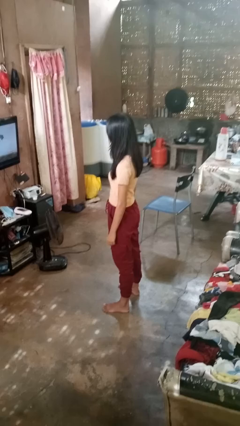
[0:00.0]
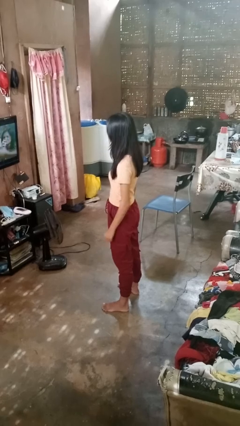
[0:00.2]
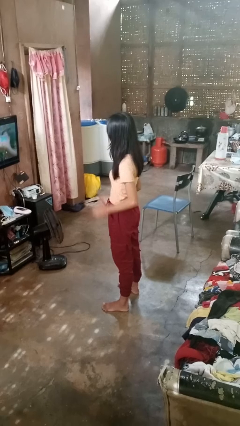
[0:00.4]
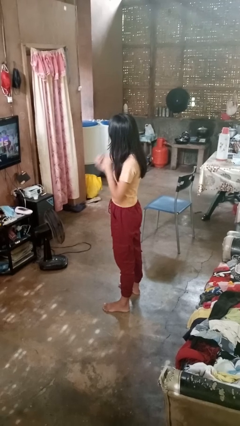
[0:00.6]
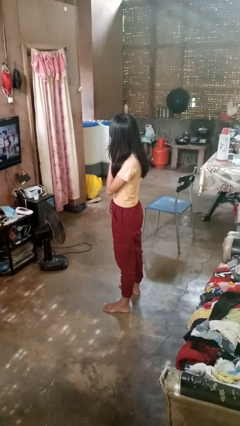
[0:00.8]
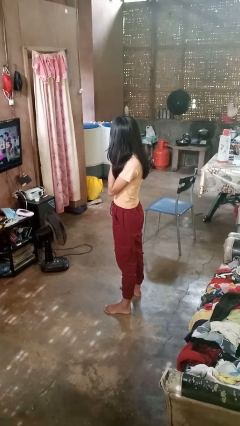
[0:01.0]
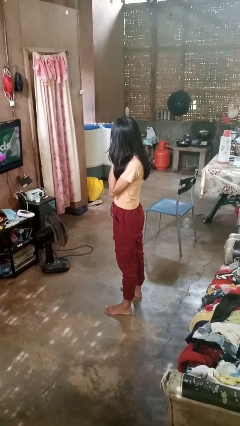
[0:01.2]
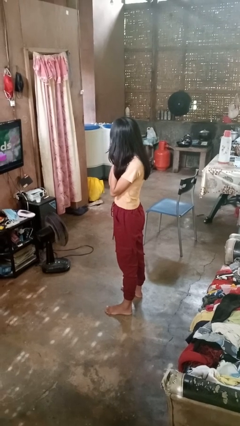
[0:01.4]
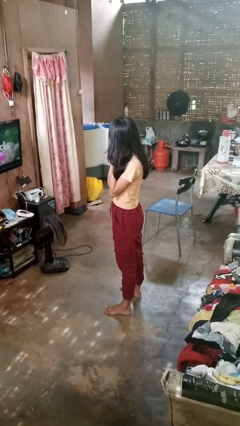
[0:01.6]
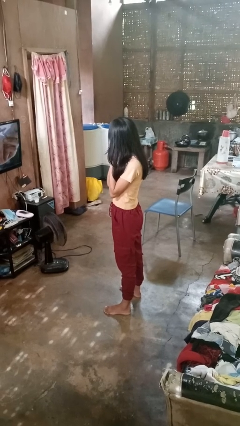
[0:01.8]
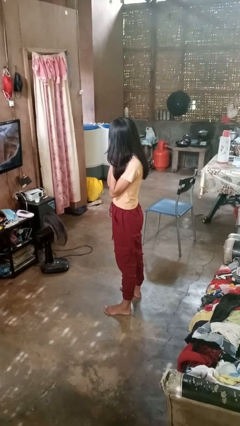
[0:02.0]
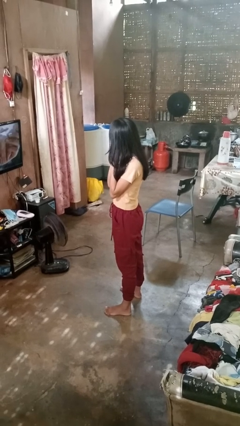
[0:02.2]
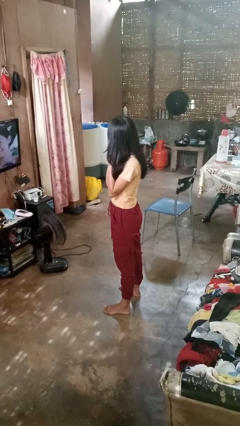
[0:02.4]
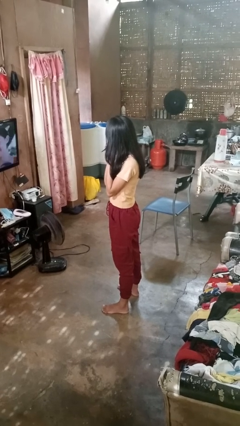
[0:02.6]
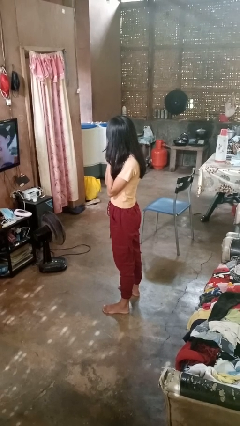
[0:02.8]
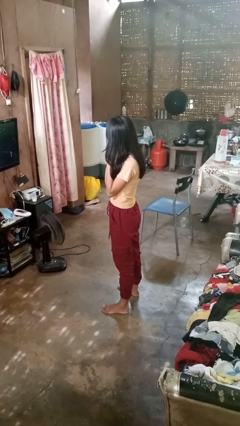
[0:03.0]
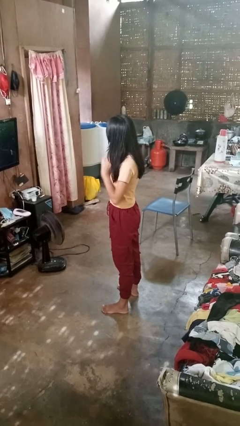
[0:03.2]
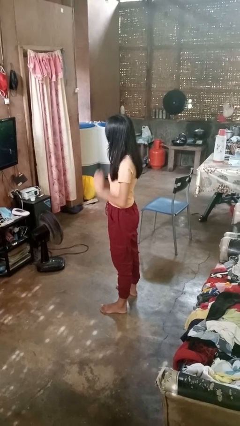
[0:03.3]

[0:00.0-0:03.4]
person puts on earrings

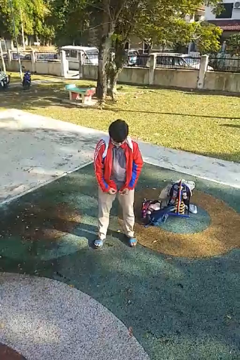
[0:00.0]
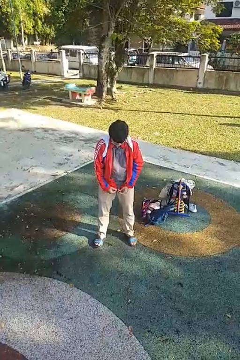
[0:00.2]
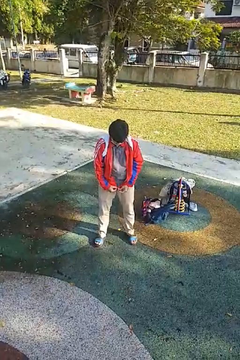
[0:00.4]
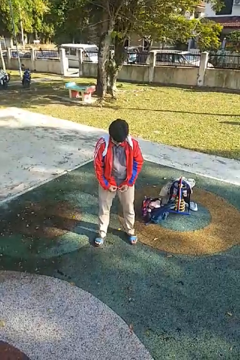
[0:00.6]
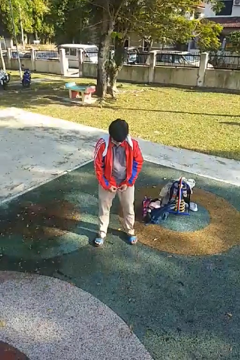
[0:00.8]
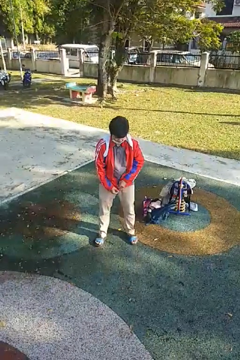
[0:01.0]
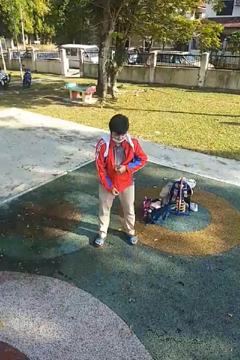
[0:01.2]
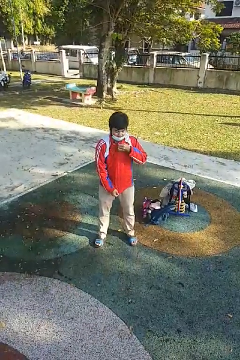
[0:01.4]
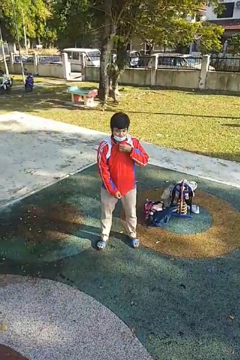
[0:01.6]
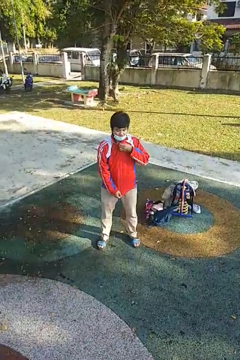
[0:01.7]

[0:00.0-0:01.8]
person zips up jacket

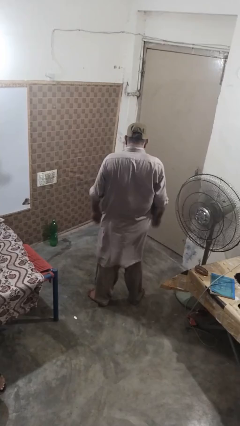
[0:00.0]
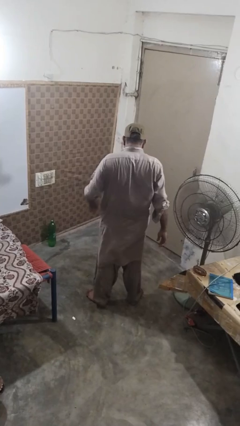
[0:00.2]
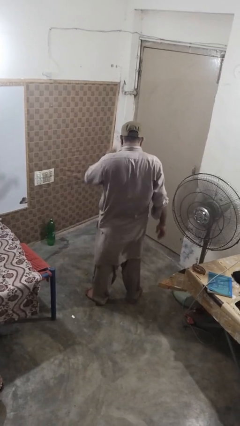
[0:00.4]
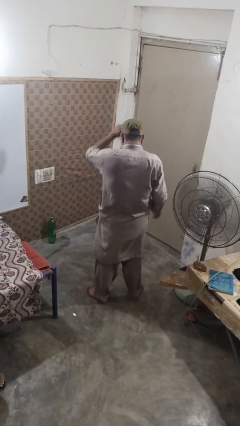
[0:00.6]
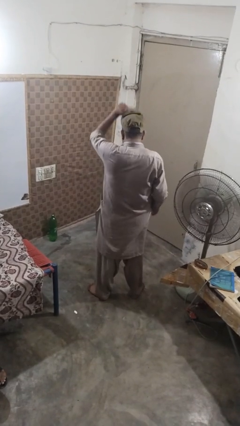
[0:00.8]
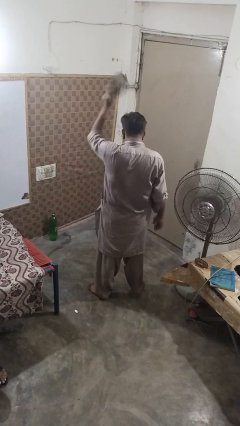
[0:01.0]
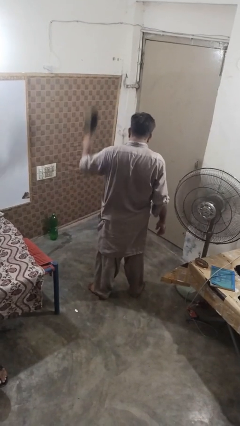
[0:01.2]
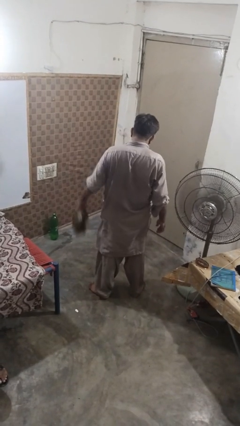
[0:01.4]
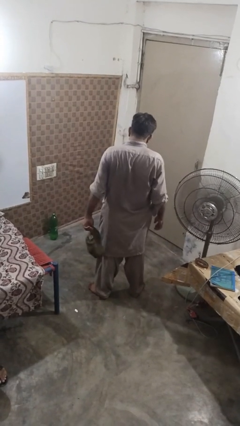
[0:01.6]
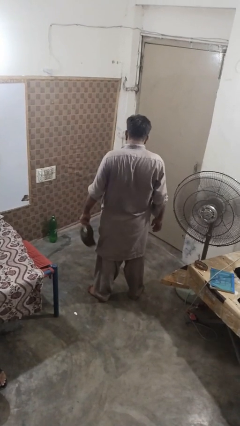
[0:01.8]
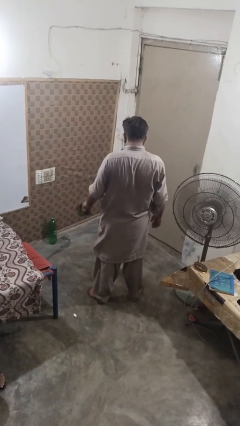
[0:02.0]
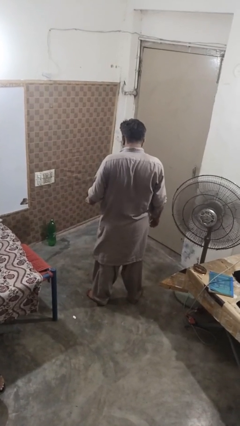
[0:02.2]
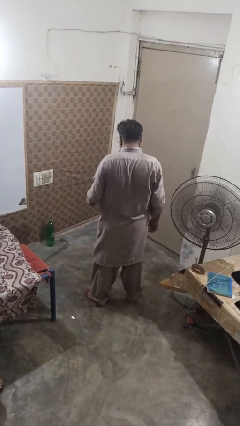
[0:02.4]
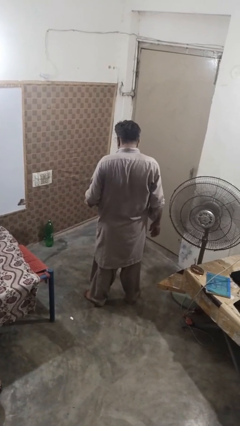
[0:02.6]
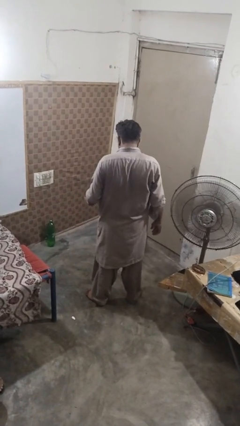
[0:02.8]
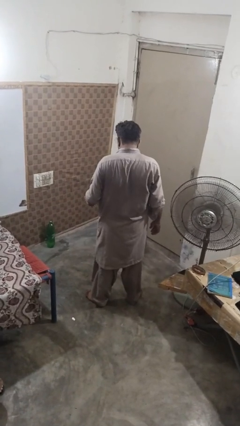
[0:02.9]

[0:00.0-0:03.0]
person takes off hat

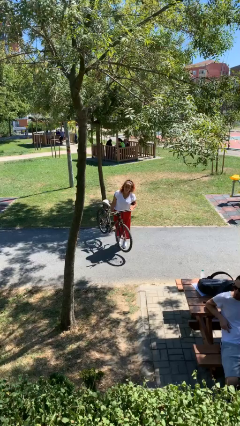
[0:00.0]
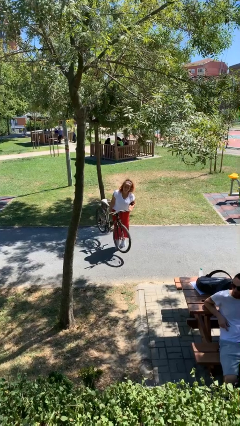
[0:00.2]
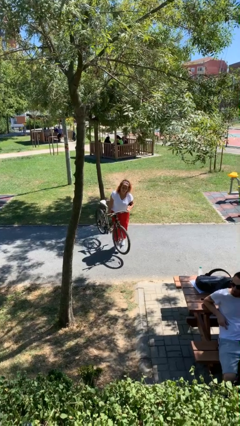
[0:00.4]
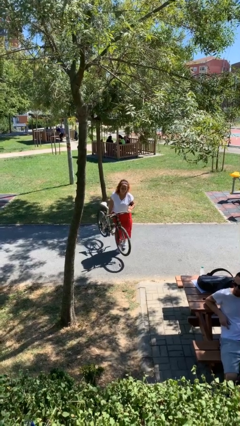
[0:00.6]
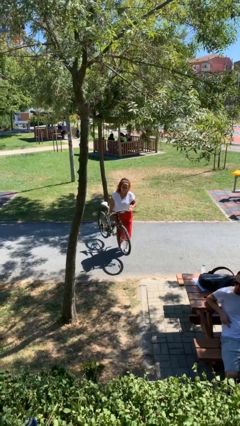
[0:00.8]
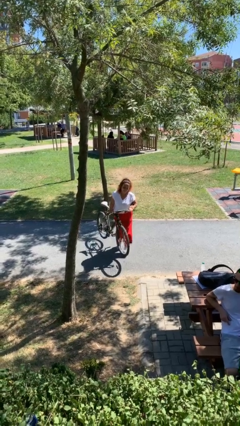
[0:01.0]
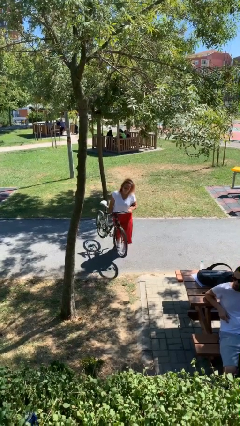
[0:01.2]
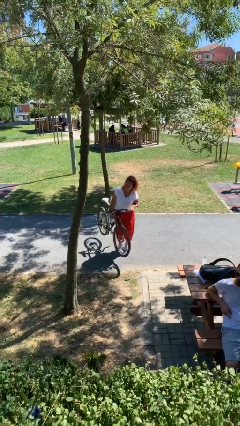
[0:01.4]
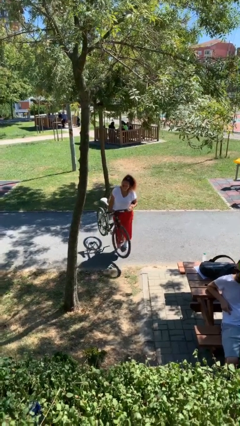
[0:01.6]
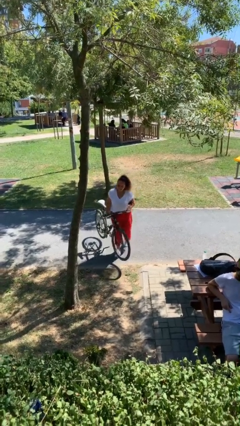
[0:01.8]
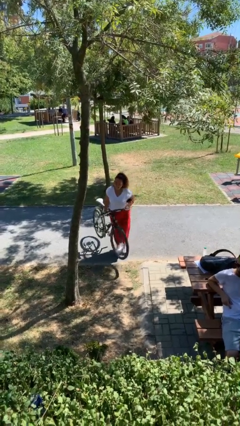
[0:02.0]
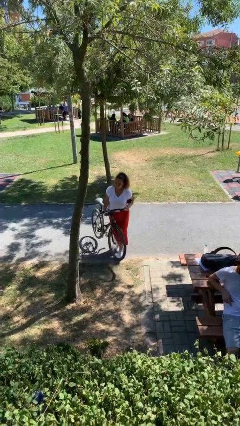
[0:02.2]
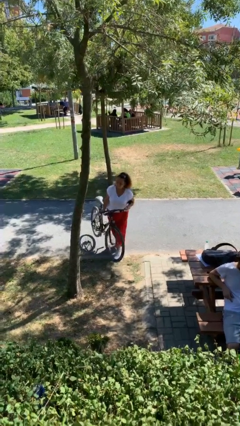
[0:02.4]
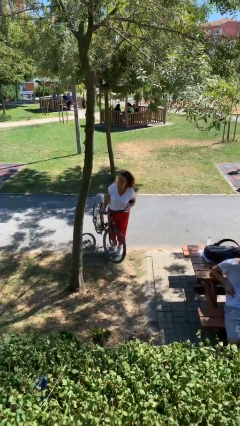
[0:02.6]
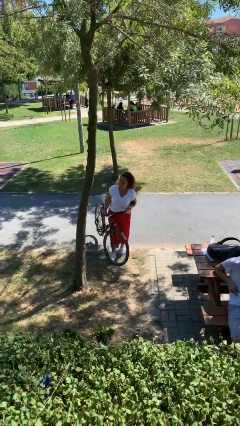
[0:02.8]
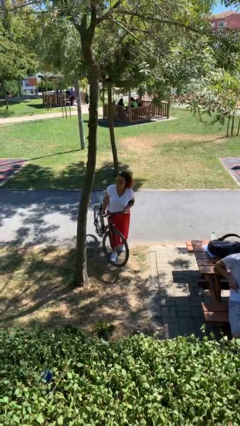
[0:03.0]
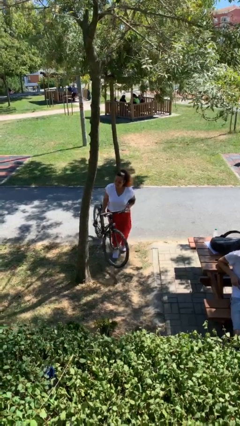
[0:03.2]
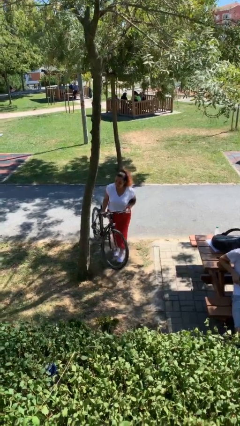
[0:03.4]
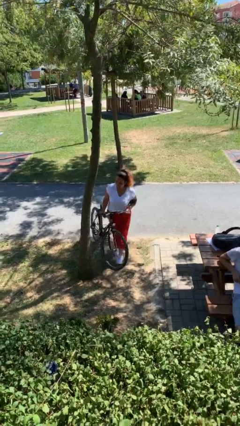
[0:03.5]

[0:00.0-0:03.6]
person carries heavy object

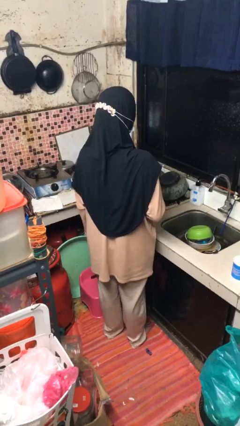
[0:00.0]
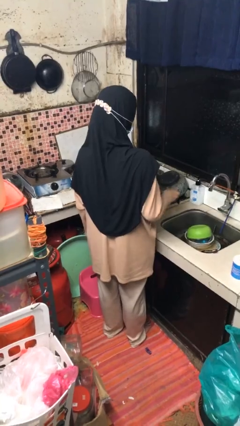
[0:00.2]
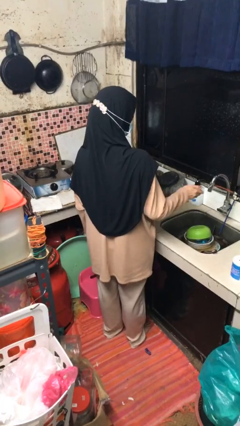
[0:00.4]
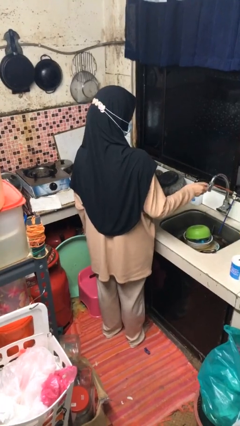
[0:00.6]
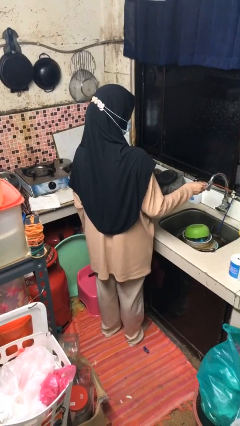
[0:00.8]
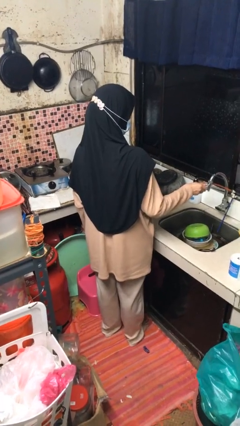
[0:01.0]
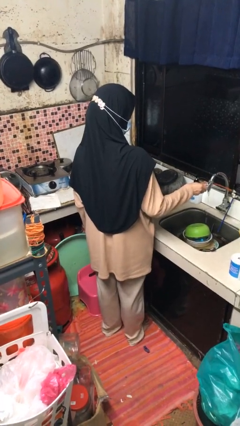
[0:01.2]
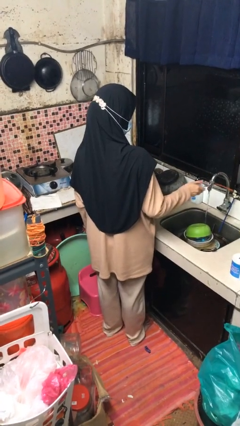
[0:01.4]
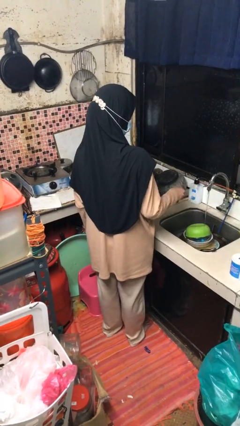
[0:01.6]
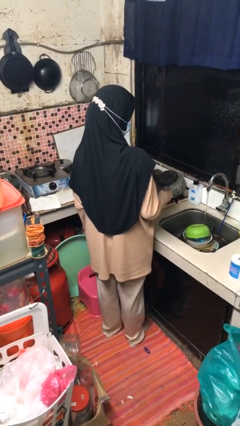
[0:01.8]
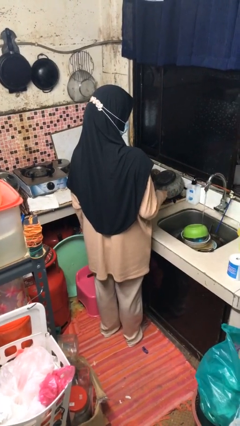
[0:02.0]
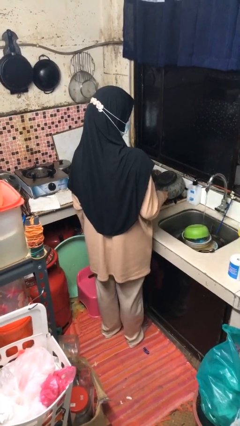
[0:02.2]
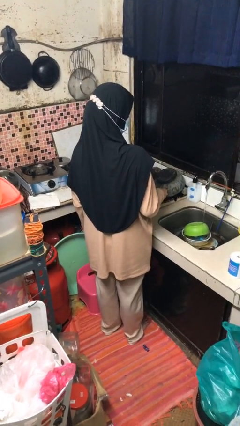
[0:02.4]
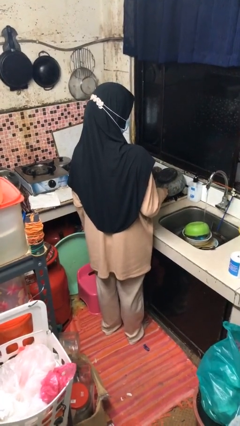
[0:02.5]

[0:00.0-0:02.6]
person turns on faucet

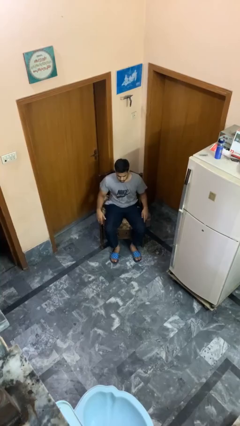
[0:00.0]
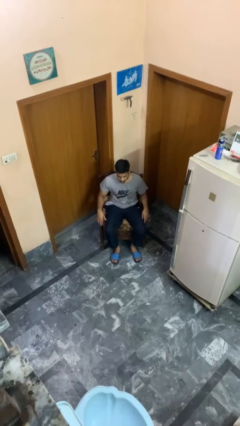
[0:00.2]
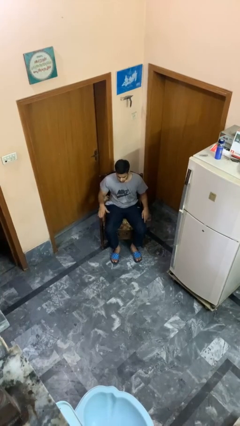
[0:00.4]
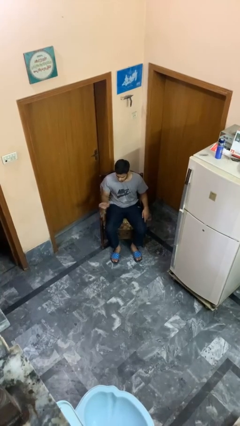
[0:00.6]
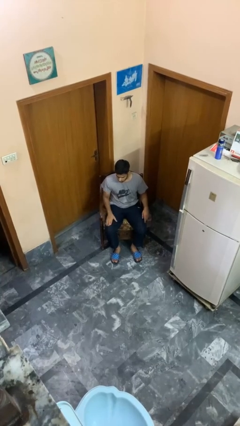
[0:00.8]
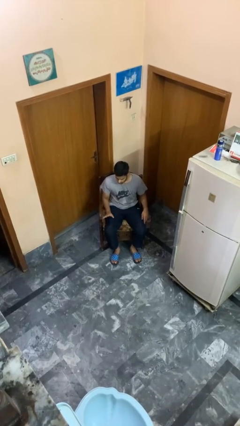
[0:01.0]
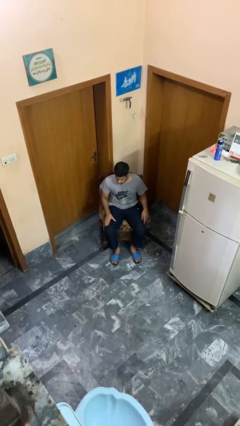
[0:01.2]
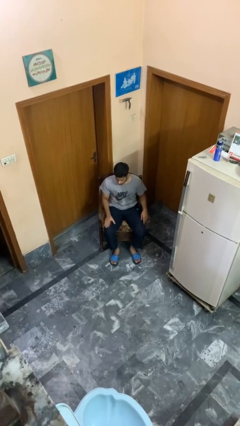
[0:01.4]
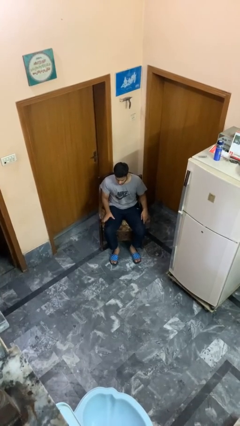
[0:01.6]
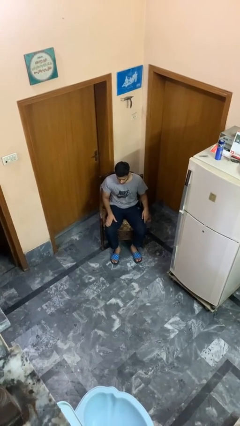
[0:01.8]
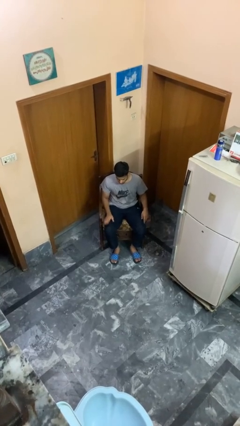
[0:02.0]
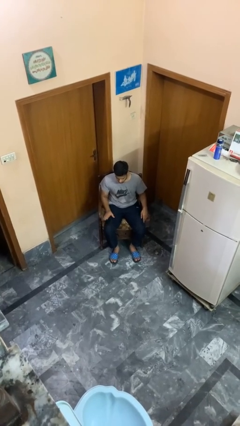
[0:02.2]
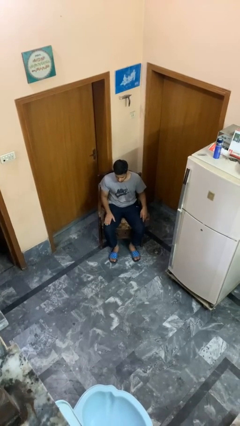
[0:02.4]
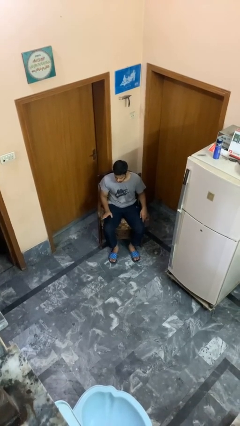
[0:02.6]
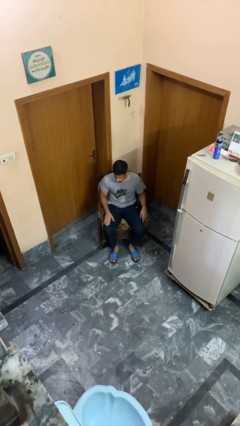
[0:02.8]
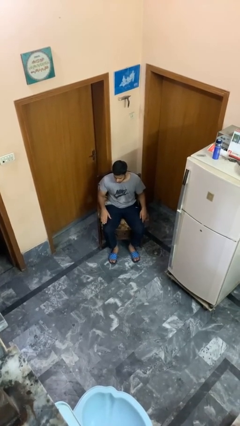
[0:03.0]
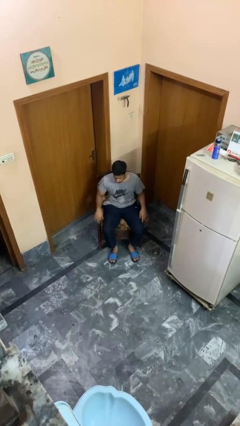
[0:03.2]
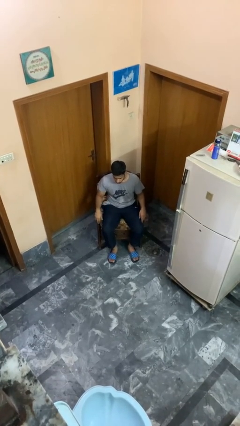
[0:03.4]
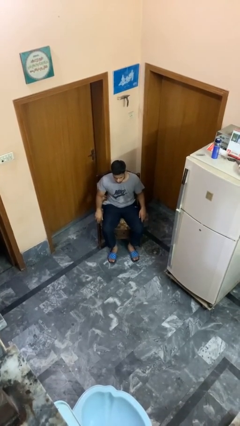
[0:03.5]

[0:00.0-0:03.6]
person slaps hands on thighs
